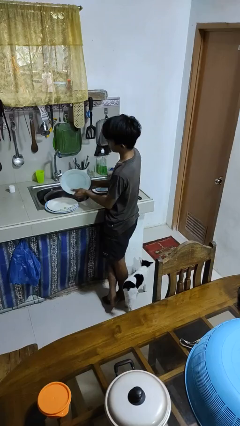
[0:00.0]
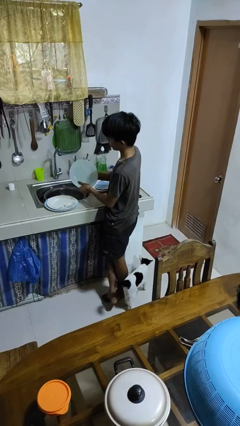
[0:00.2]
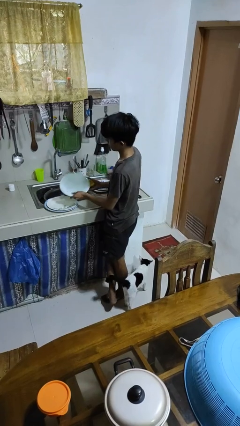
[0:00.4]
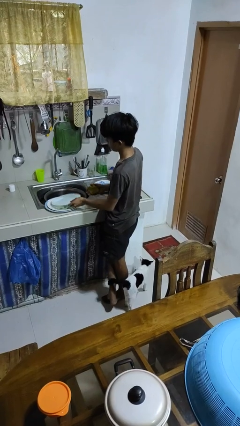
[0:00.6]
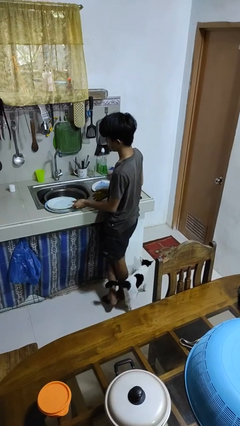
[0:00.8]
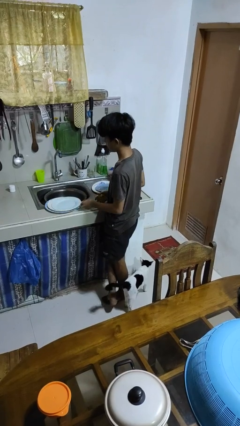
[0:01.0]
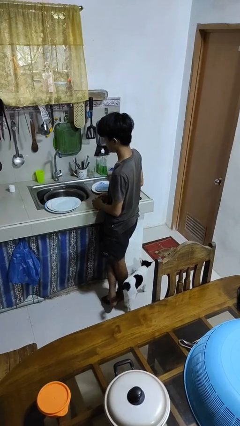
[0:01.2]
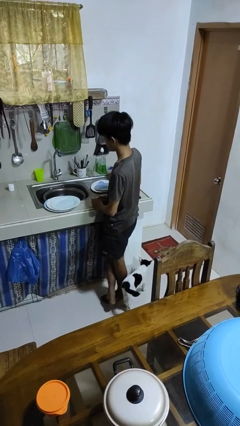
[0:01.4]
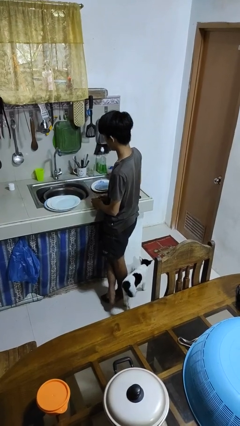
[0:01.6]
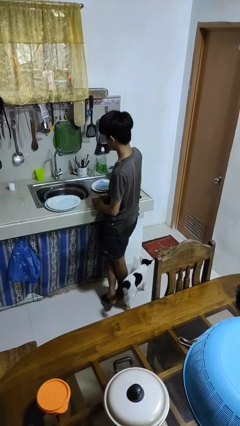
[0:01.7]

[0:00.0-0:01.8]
person dries hands with towel

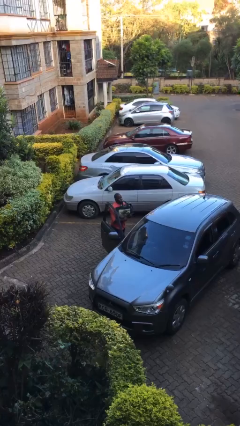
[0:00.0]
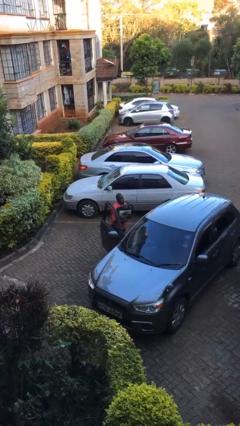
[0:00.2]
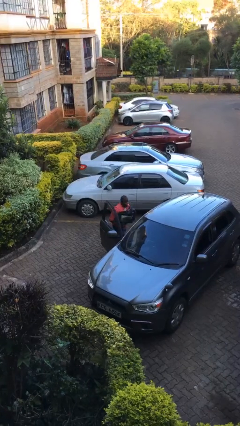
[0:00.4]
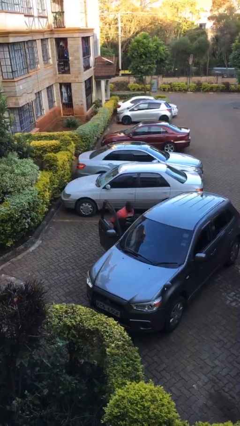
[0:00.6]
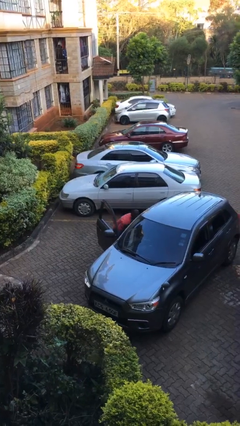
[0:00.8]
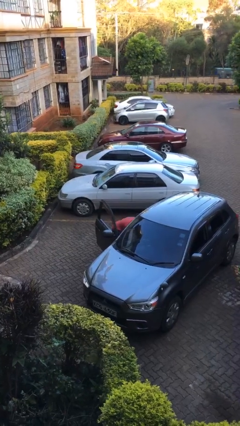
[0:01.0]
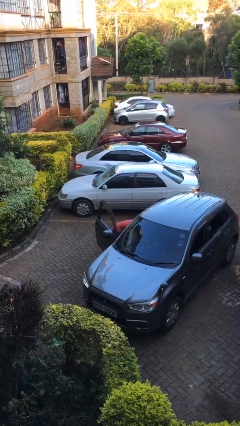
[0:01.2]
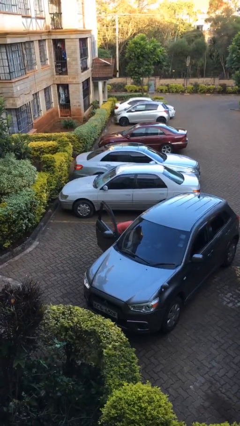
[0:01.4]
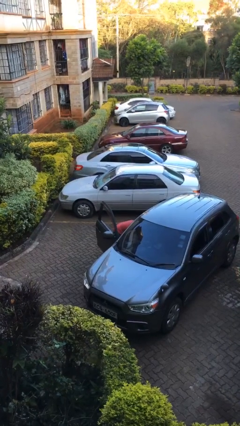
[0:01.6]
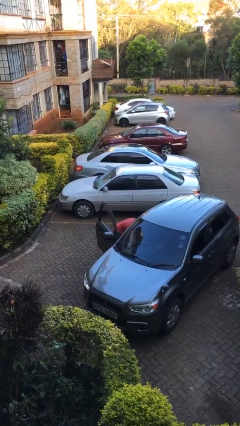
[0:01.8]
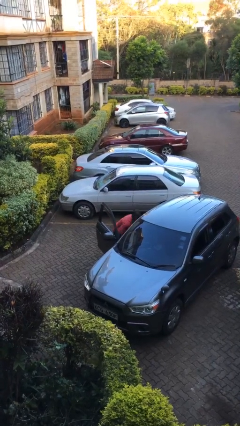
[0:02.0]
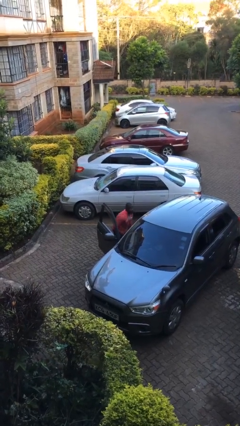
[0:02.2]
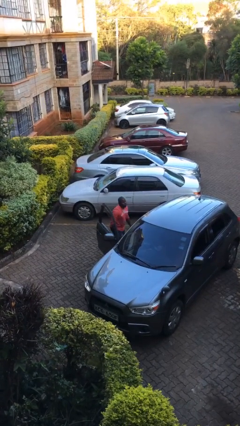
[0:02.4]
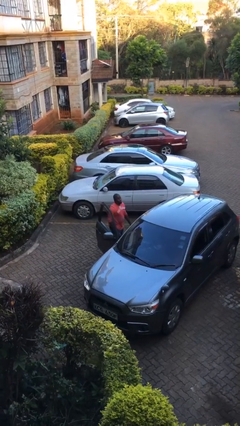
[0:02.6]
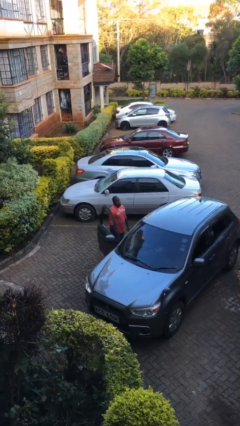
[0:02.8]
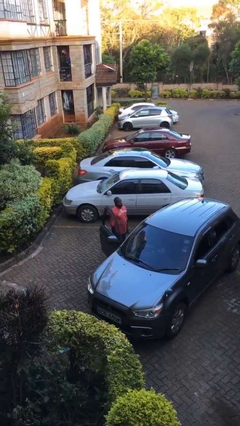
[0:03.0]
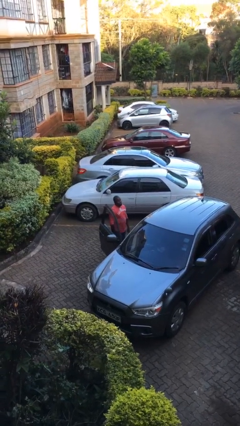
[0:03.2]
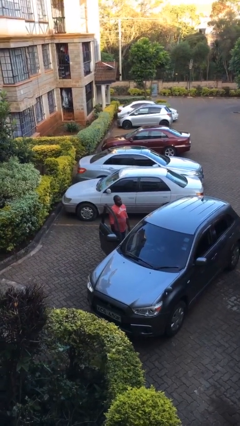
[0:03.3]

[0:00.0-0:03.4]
person loads car

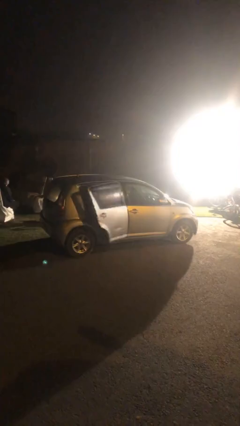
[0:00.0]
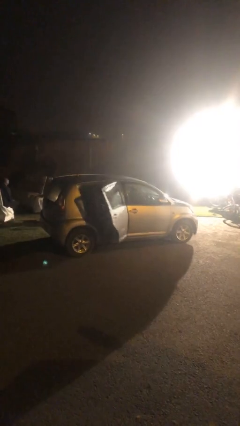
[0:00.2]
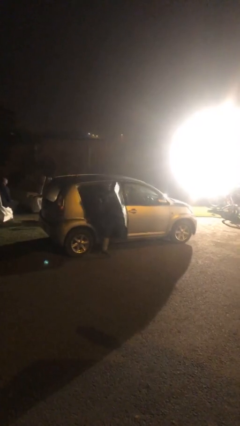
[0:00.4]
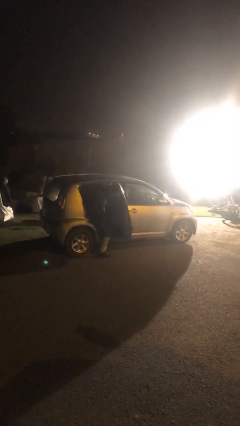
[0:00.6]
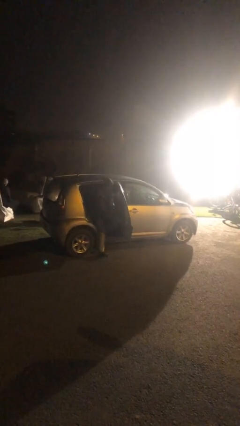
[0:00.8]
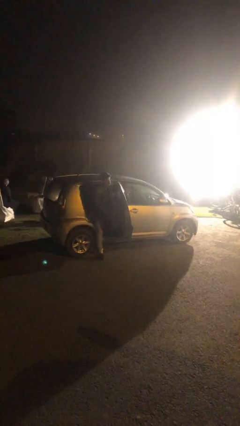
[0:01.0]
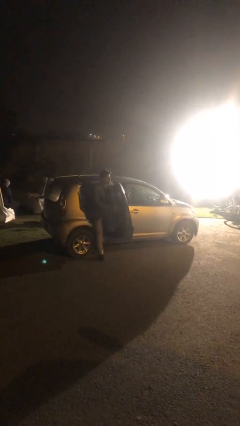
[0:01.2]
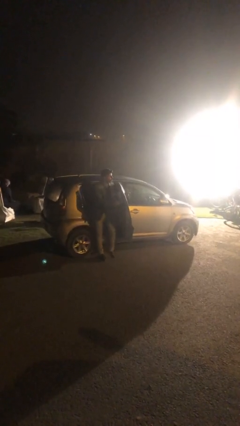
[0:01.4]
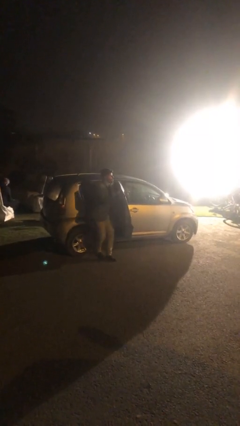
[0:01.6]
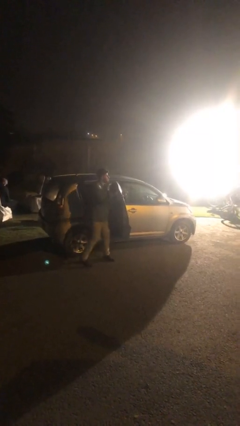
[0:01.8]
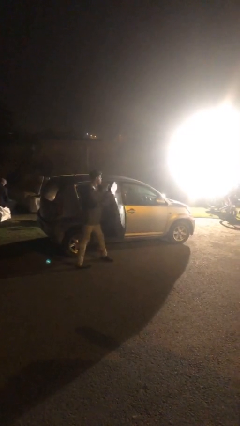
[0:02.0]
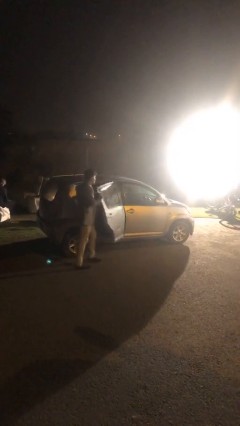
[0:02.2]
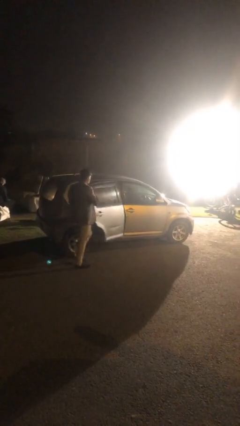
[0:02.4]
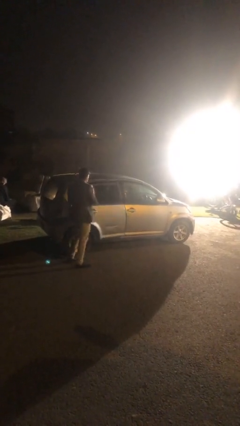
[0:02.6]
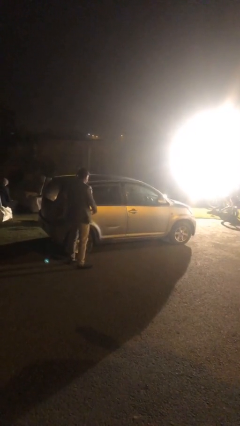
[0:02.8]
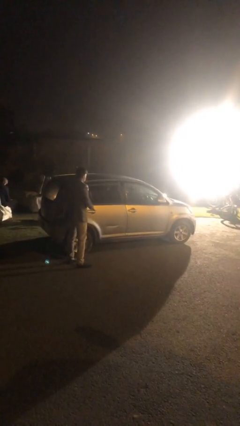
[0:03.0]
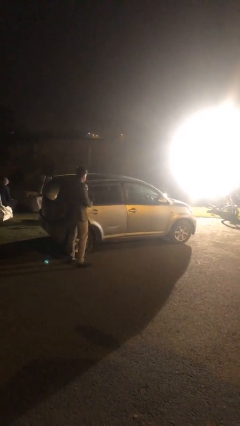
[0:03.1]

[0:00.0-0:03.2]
car drops off person

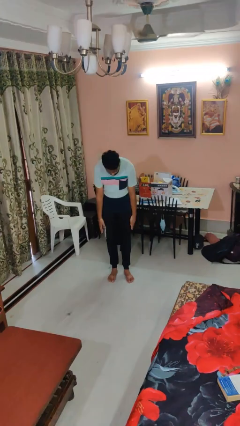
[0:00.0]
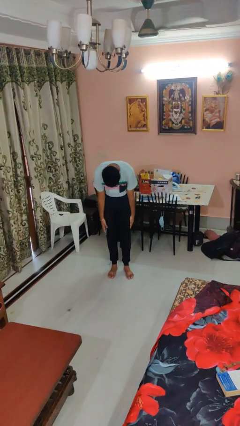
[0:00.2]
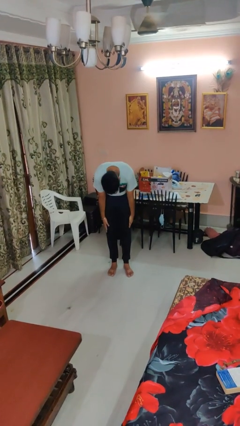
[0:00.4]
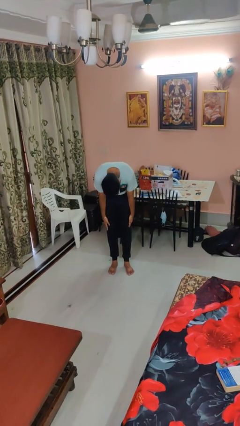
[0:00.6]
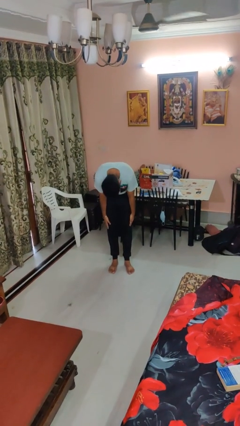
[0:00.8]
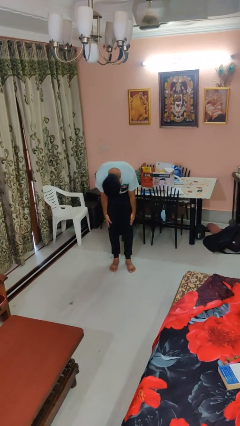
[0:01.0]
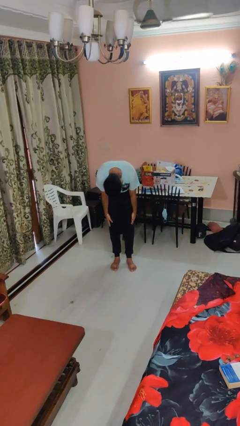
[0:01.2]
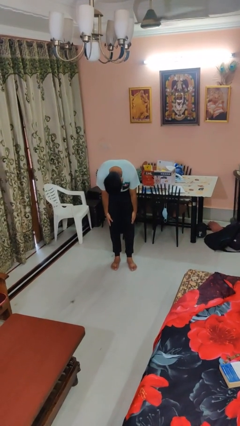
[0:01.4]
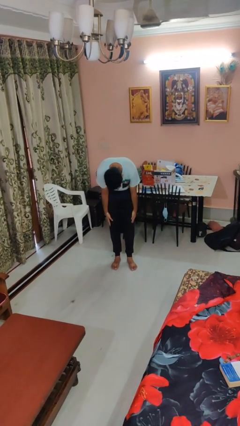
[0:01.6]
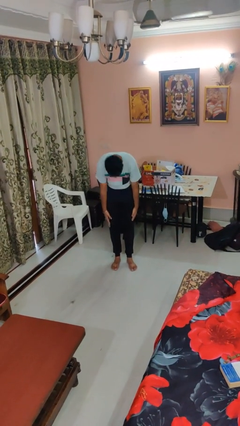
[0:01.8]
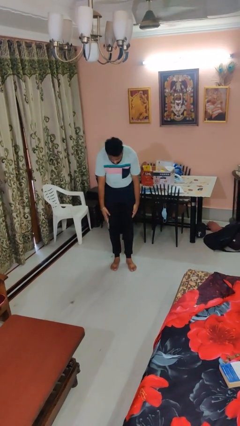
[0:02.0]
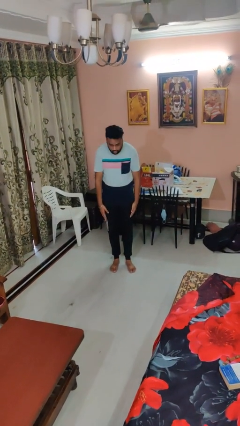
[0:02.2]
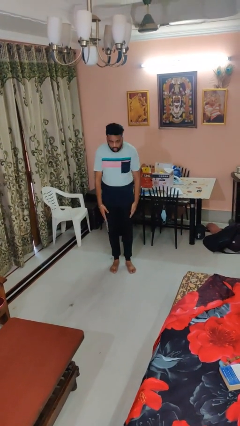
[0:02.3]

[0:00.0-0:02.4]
person bows

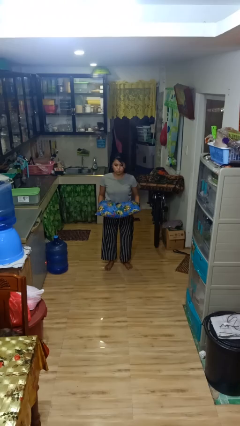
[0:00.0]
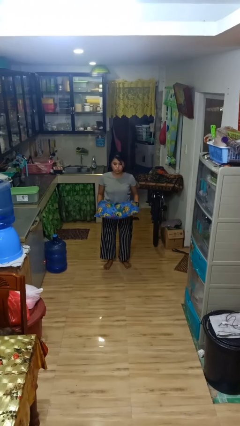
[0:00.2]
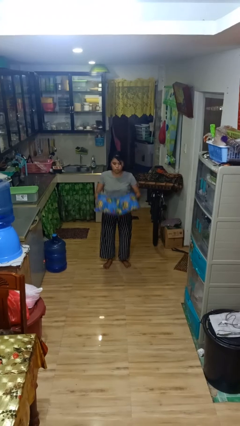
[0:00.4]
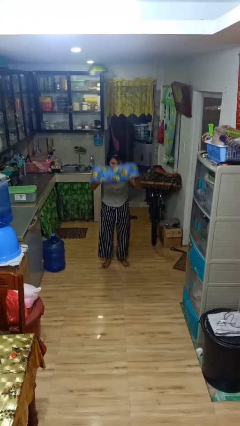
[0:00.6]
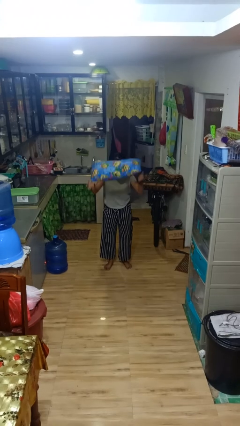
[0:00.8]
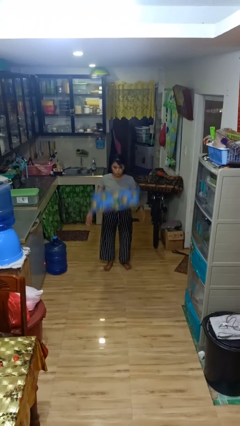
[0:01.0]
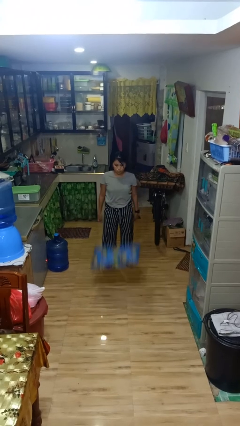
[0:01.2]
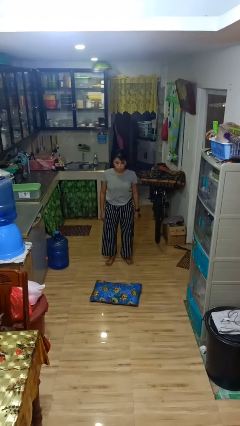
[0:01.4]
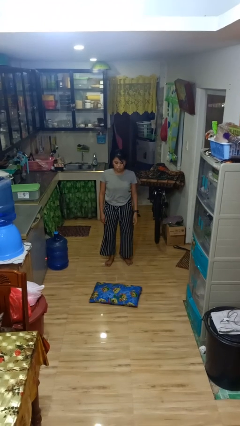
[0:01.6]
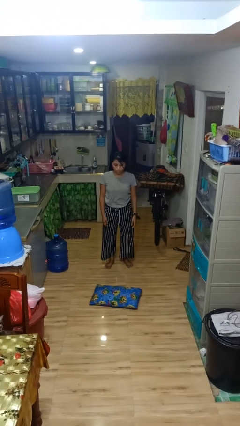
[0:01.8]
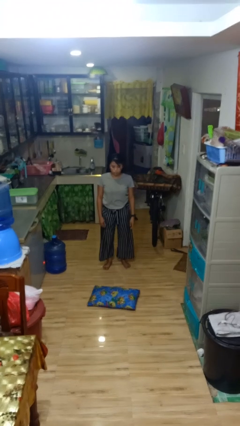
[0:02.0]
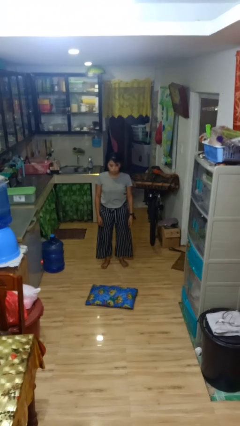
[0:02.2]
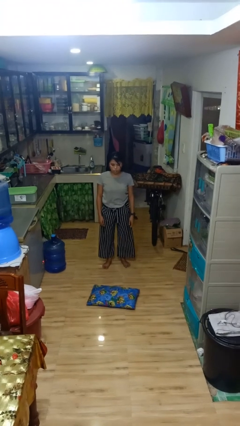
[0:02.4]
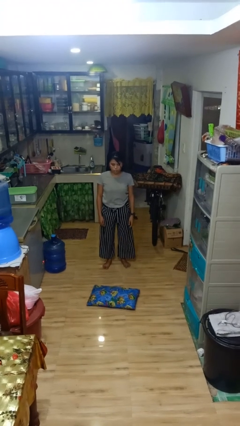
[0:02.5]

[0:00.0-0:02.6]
person throws object into air

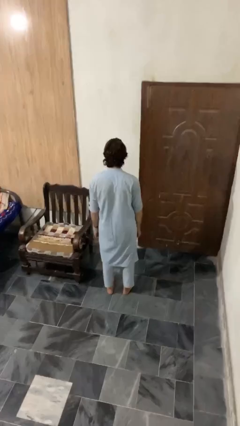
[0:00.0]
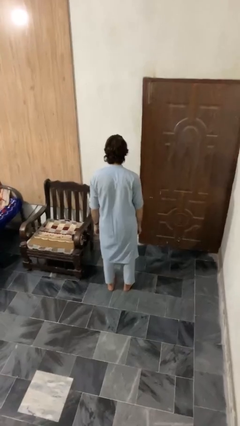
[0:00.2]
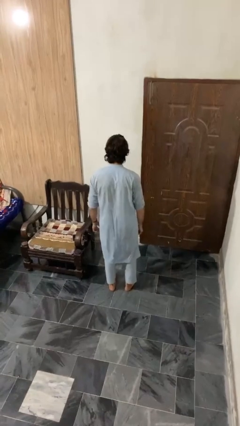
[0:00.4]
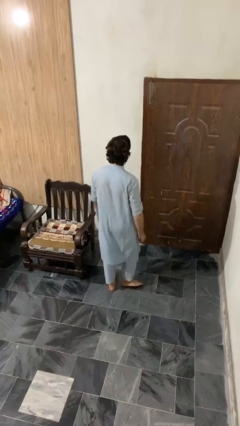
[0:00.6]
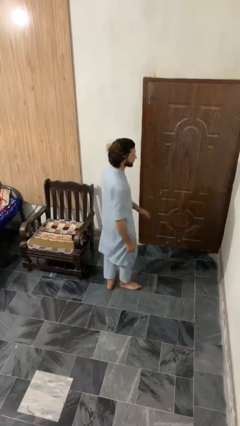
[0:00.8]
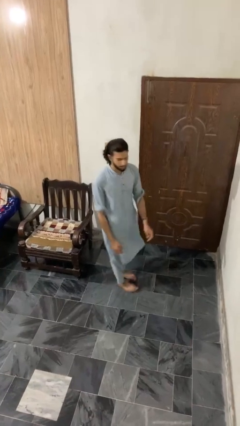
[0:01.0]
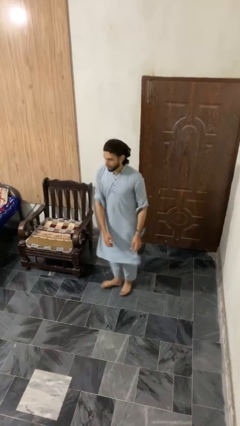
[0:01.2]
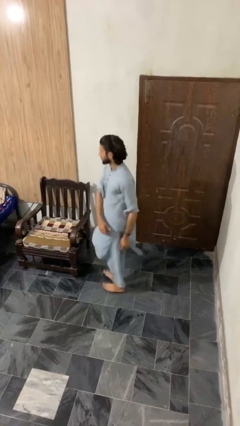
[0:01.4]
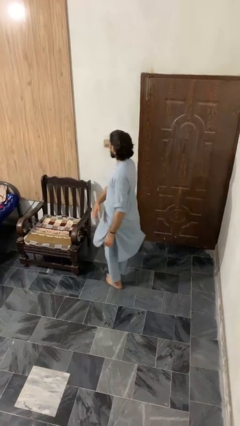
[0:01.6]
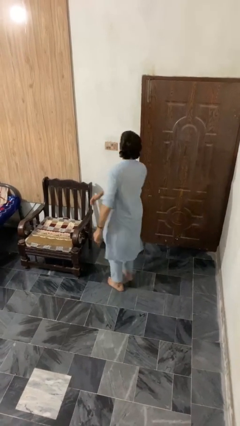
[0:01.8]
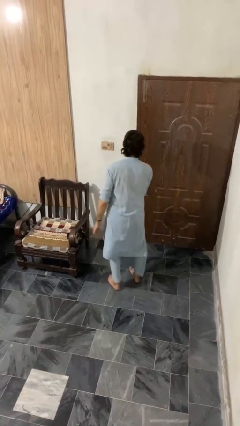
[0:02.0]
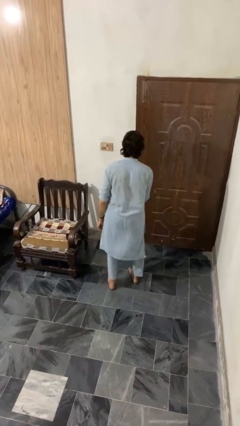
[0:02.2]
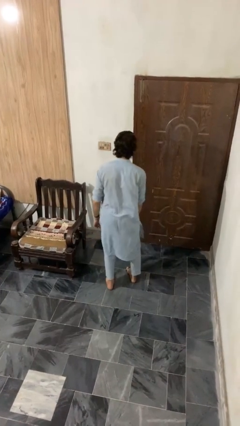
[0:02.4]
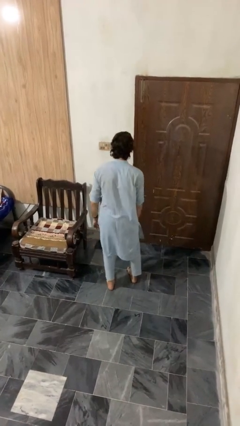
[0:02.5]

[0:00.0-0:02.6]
person twirls

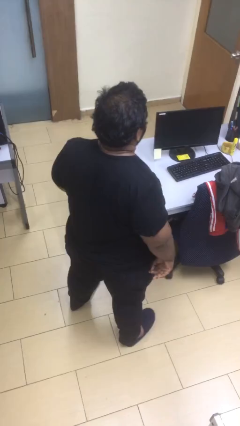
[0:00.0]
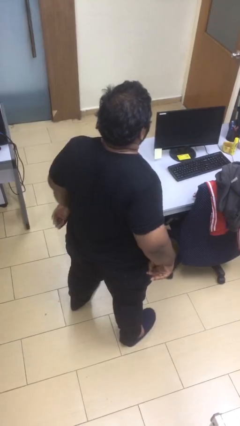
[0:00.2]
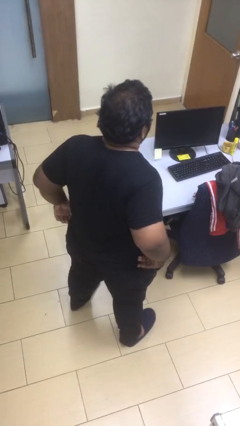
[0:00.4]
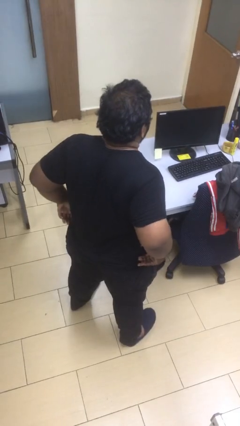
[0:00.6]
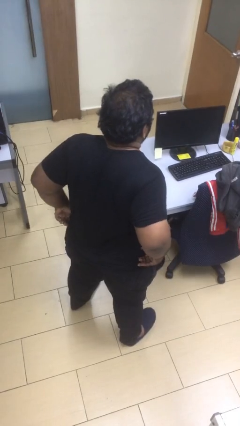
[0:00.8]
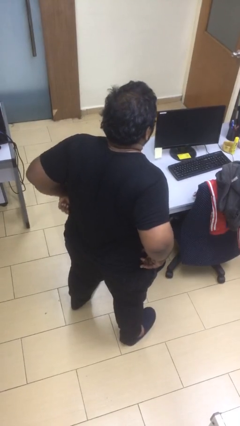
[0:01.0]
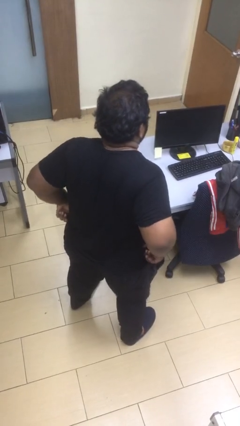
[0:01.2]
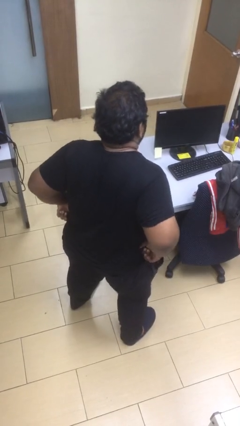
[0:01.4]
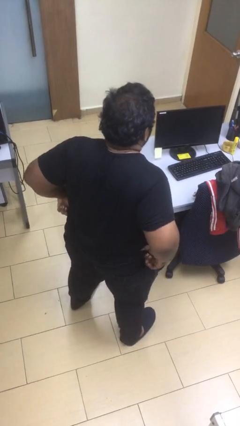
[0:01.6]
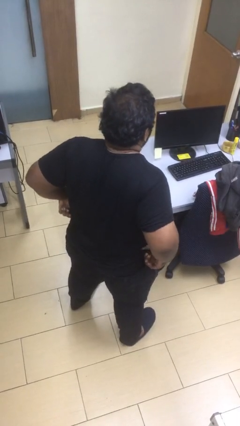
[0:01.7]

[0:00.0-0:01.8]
person hikes up pants
